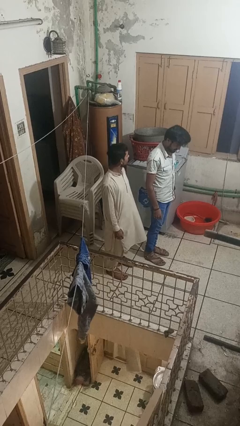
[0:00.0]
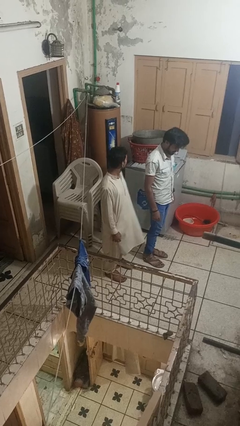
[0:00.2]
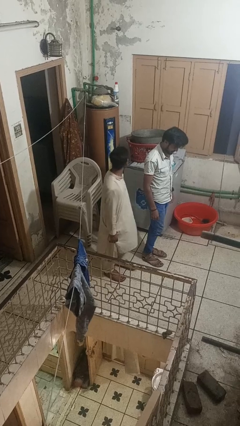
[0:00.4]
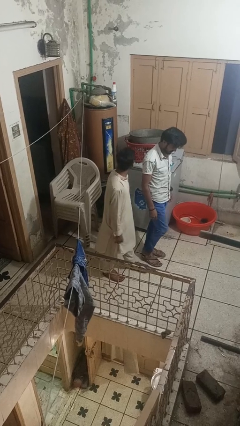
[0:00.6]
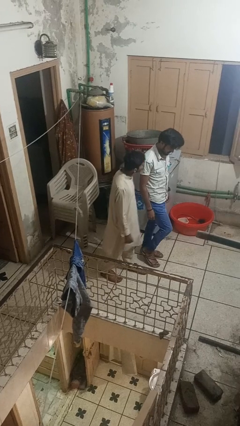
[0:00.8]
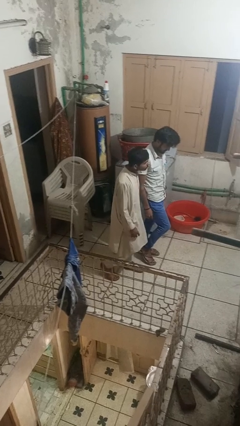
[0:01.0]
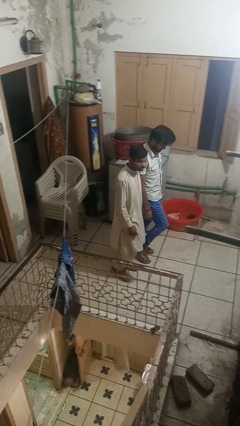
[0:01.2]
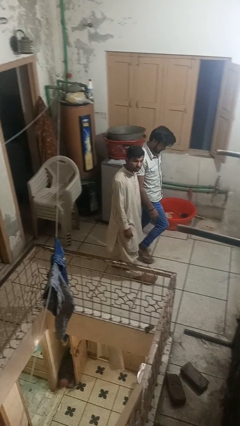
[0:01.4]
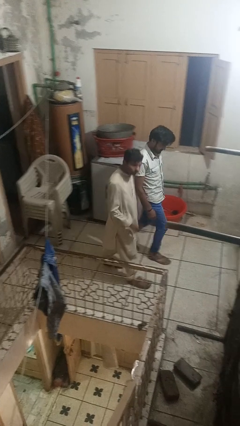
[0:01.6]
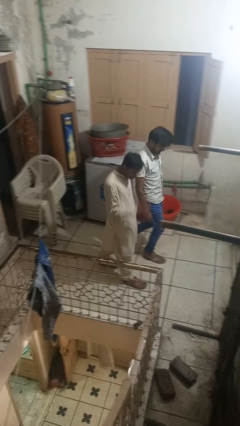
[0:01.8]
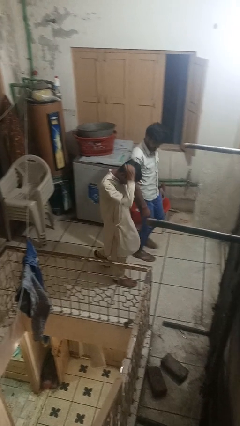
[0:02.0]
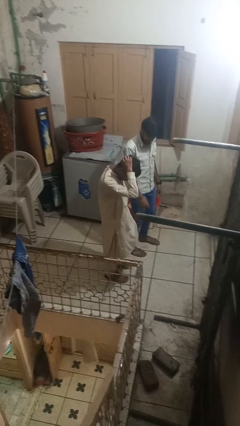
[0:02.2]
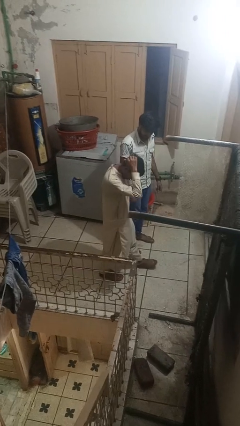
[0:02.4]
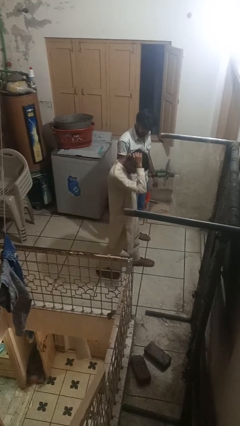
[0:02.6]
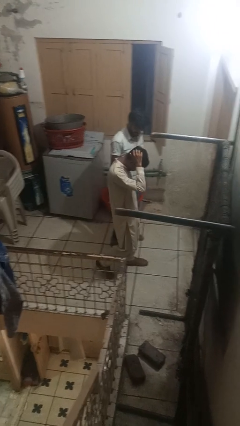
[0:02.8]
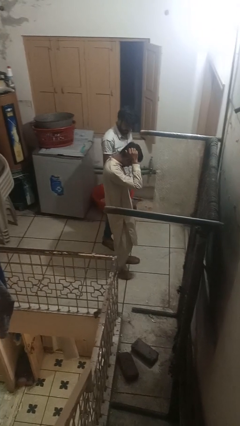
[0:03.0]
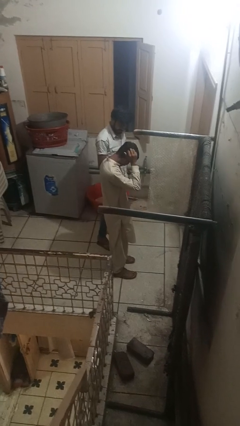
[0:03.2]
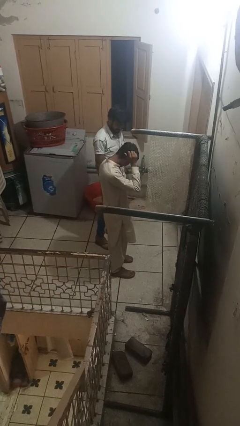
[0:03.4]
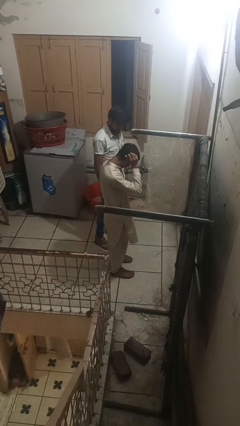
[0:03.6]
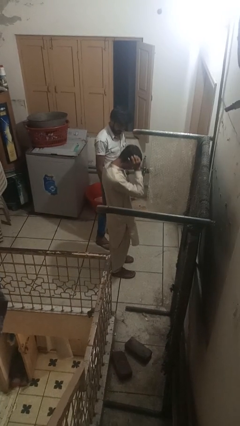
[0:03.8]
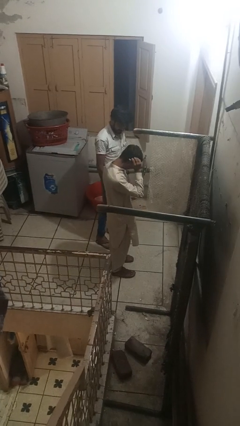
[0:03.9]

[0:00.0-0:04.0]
person bumps into person

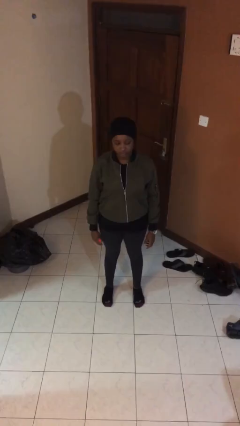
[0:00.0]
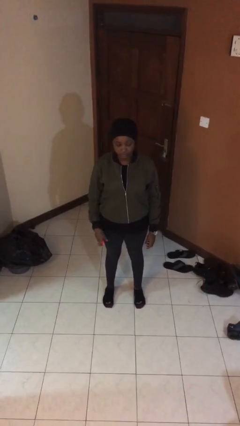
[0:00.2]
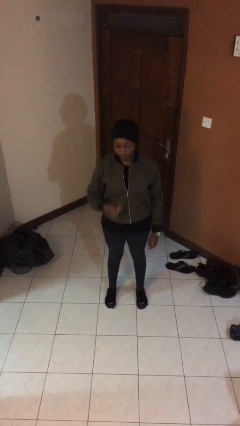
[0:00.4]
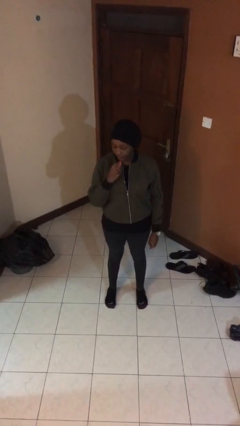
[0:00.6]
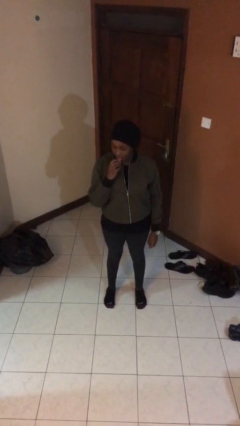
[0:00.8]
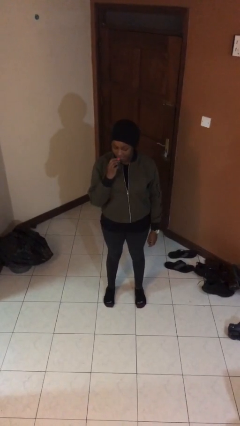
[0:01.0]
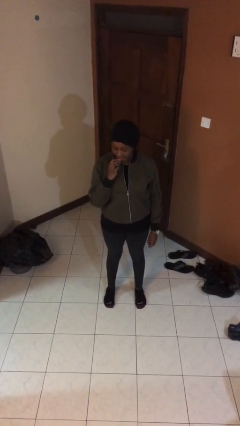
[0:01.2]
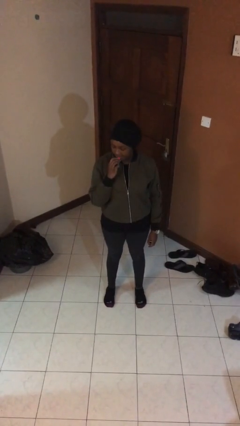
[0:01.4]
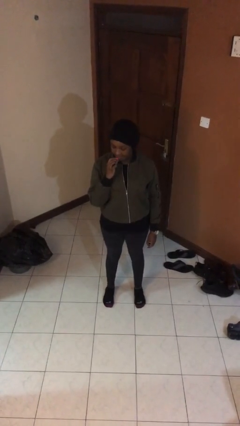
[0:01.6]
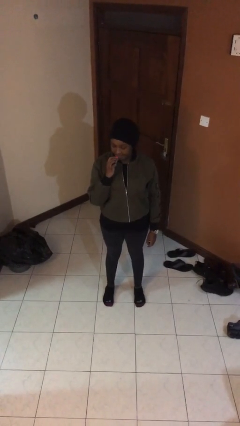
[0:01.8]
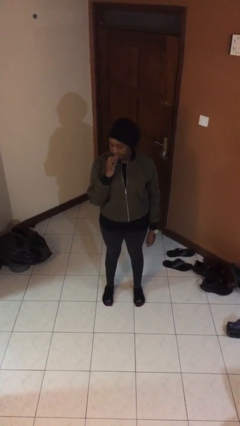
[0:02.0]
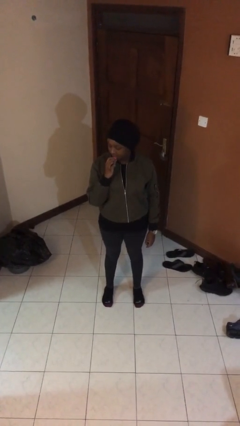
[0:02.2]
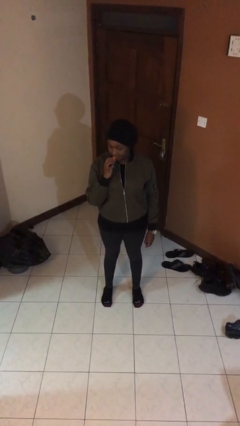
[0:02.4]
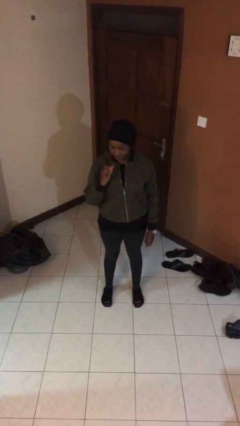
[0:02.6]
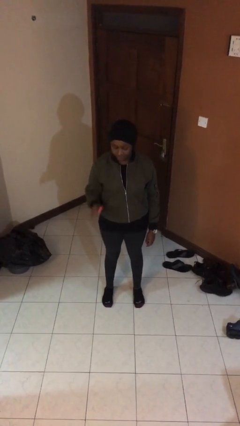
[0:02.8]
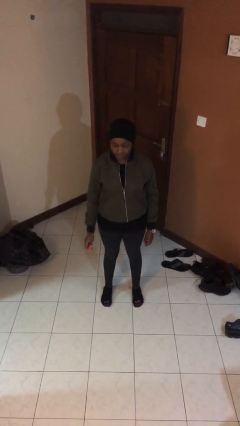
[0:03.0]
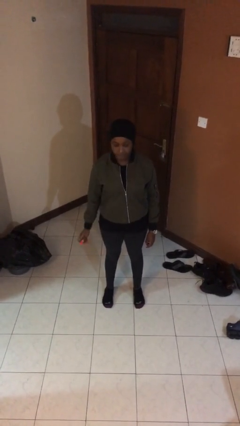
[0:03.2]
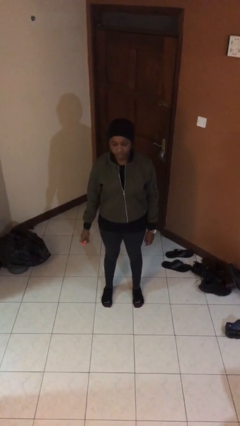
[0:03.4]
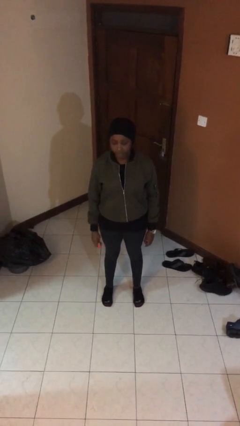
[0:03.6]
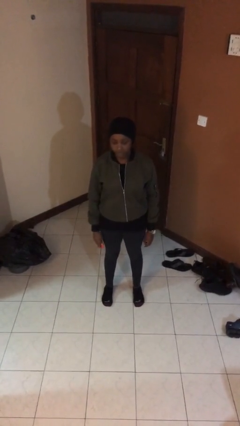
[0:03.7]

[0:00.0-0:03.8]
person applies lip makeup

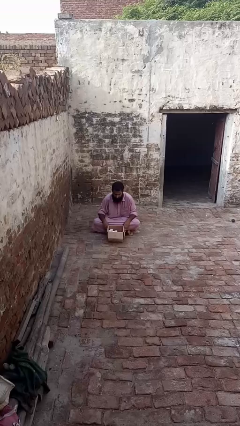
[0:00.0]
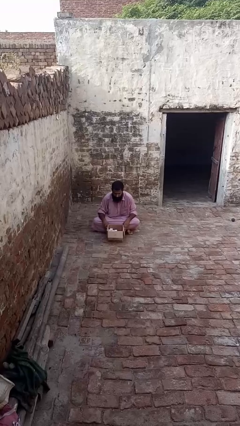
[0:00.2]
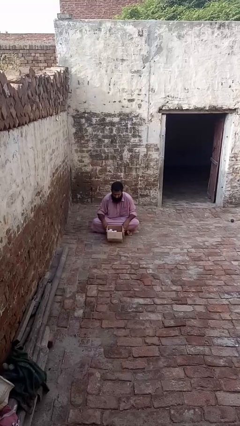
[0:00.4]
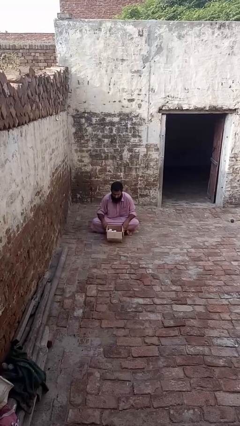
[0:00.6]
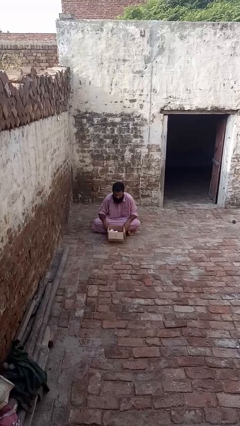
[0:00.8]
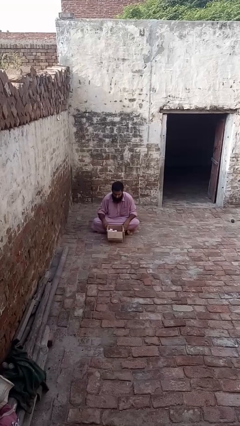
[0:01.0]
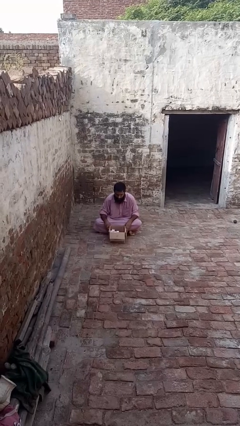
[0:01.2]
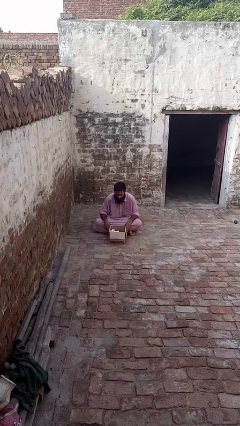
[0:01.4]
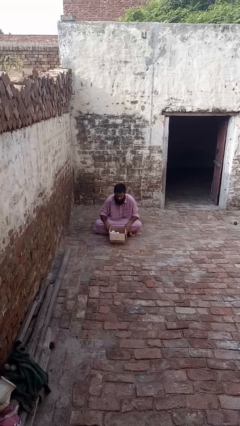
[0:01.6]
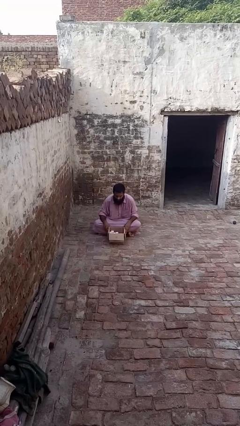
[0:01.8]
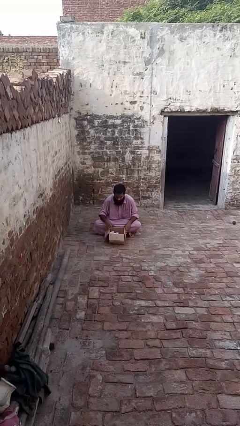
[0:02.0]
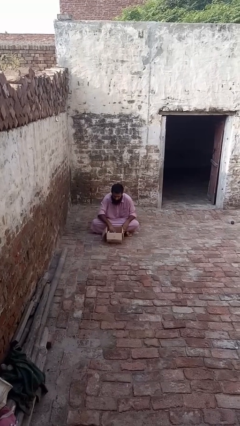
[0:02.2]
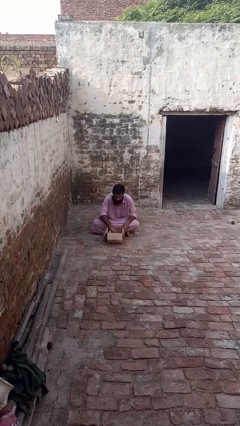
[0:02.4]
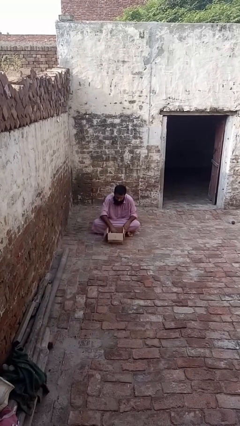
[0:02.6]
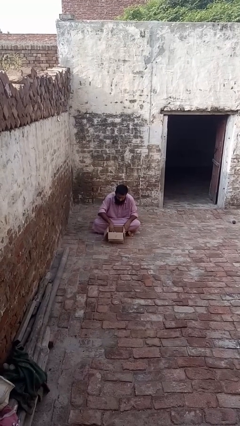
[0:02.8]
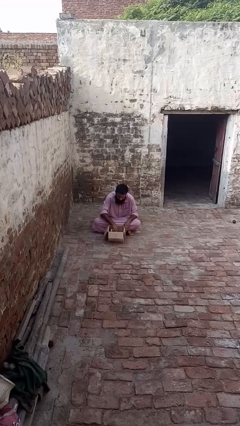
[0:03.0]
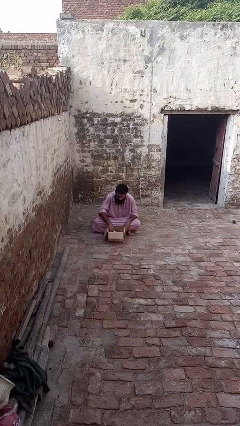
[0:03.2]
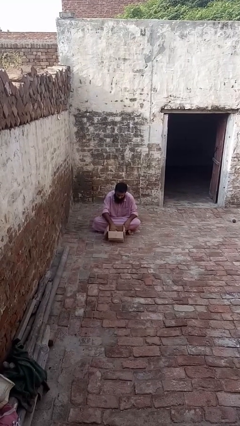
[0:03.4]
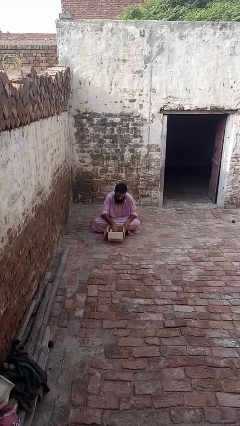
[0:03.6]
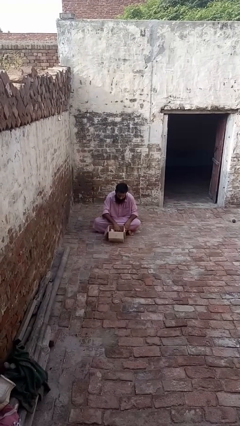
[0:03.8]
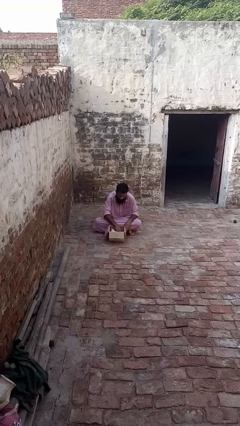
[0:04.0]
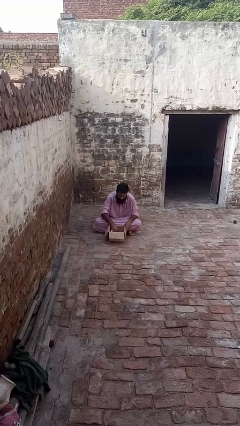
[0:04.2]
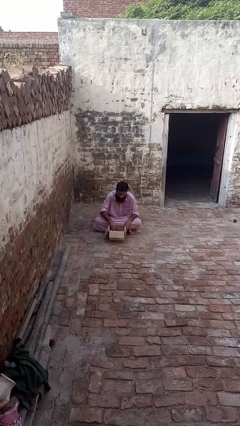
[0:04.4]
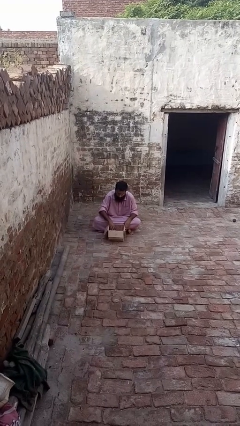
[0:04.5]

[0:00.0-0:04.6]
person searches in box

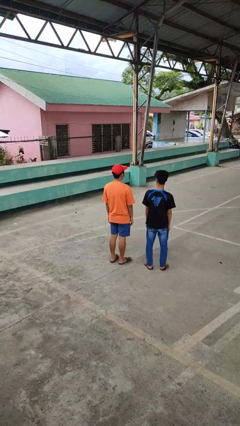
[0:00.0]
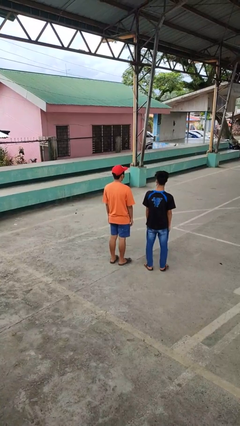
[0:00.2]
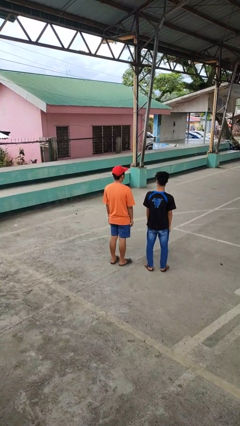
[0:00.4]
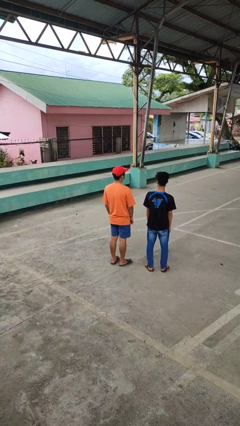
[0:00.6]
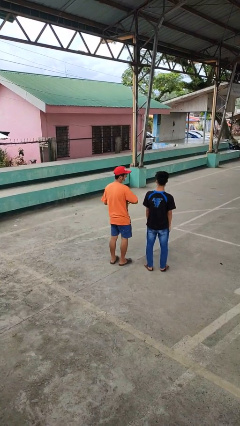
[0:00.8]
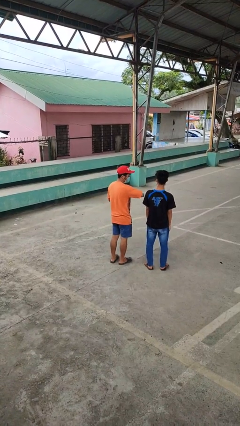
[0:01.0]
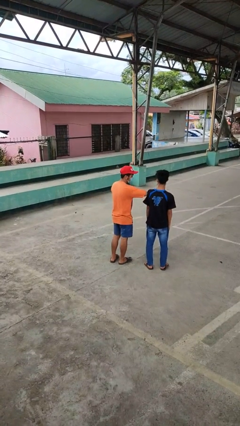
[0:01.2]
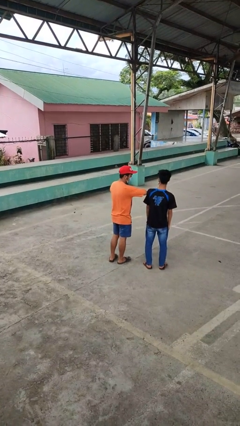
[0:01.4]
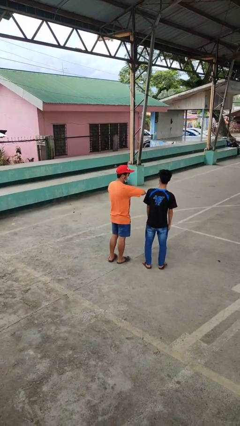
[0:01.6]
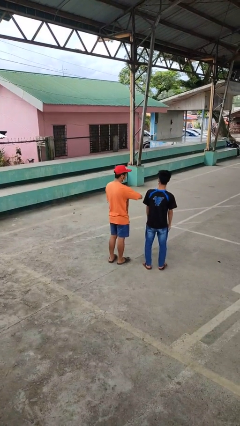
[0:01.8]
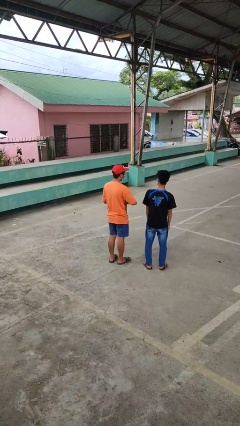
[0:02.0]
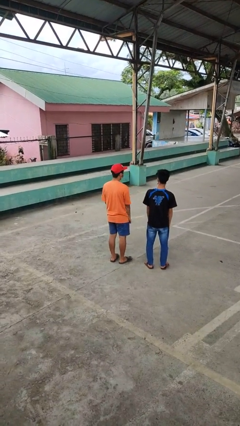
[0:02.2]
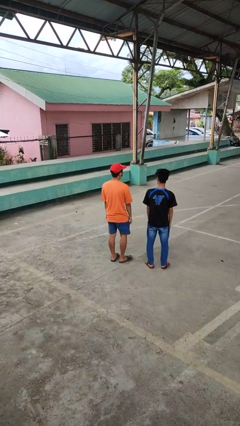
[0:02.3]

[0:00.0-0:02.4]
person nudges person with elbow

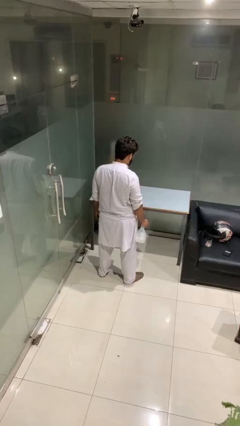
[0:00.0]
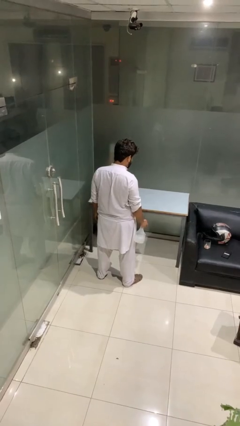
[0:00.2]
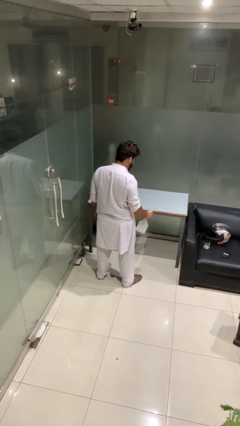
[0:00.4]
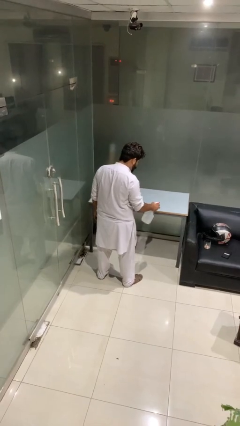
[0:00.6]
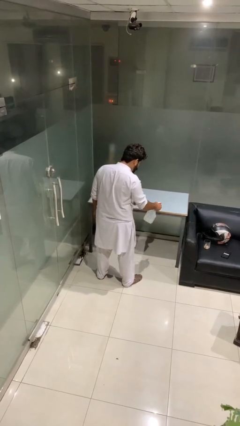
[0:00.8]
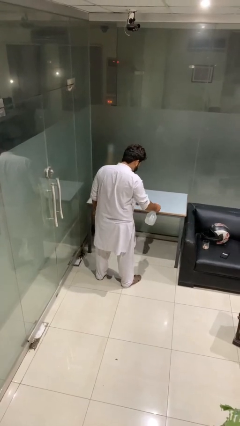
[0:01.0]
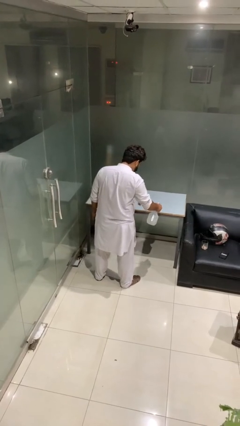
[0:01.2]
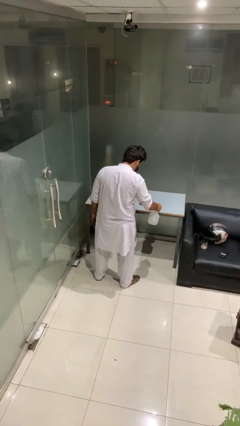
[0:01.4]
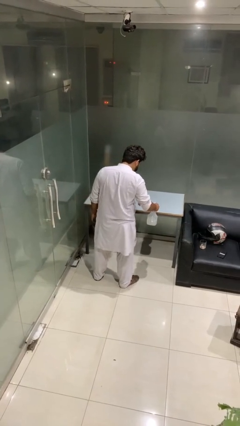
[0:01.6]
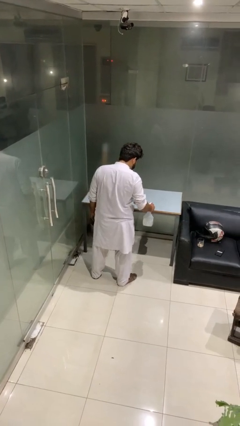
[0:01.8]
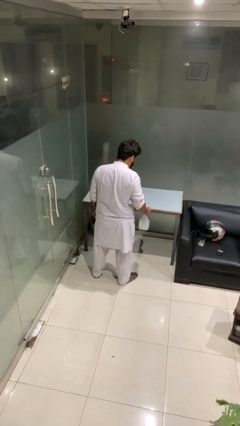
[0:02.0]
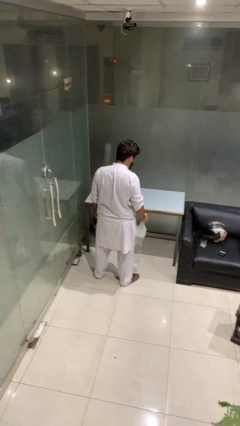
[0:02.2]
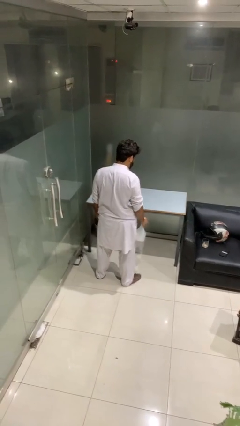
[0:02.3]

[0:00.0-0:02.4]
person sprays from bottle
